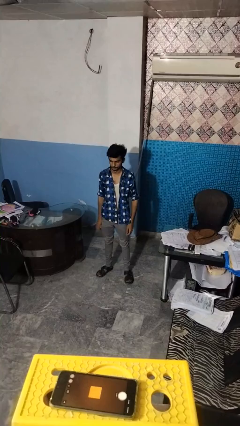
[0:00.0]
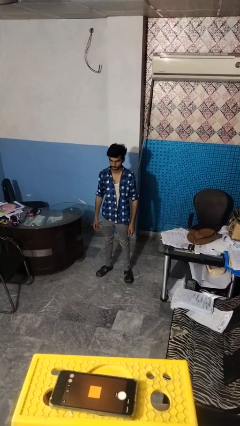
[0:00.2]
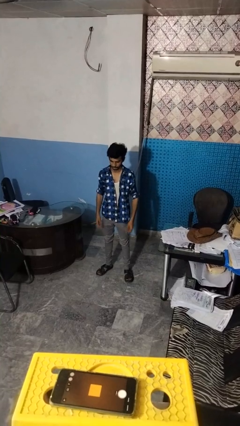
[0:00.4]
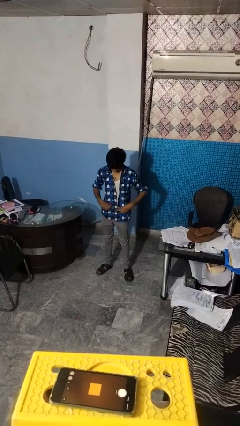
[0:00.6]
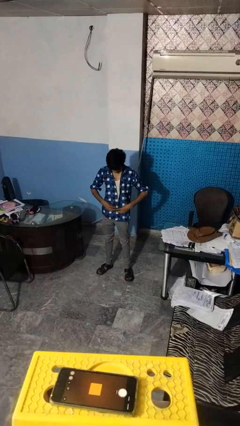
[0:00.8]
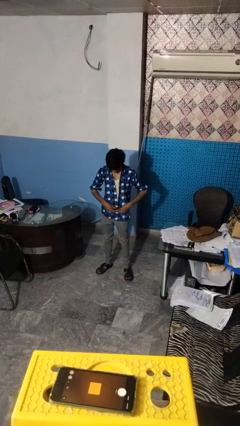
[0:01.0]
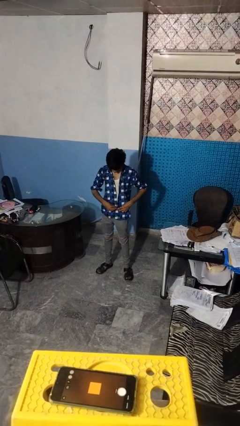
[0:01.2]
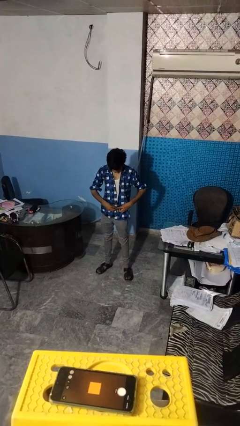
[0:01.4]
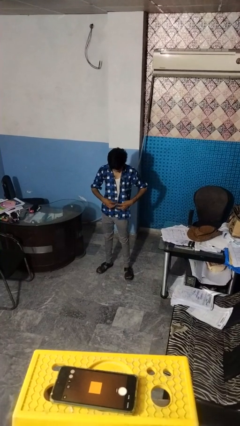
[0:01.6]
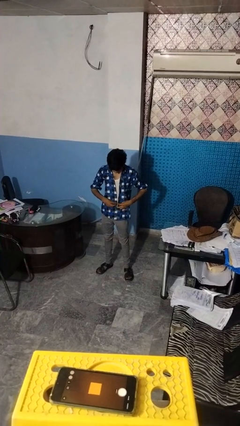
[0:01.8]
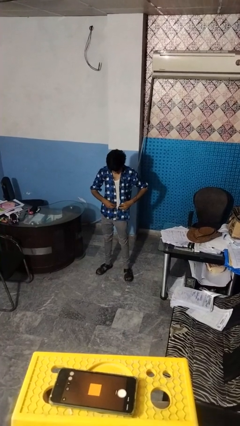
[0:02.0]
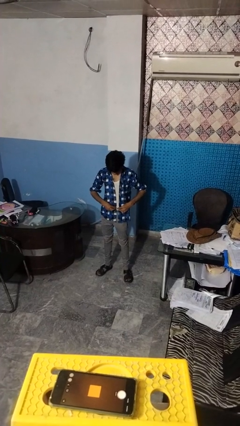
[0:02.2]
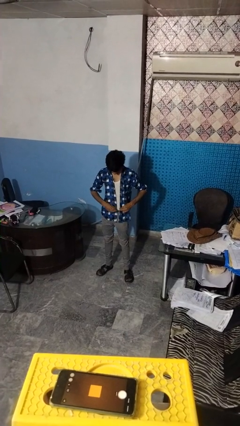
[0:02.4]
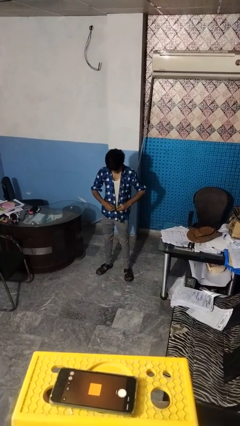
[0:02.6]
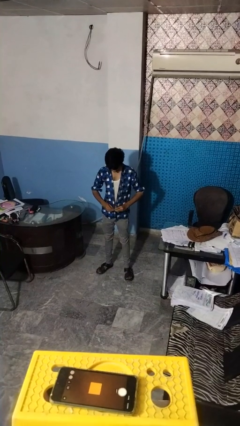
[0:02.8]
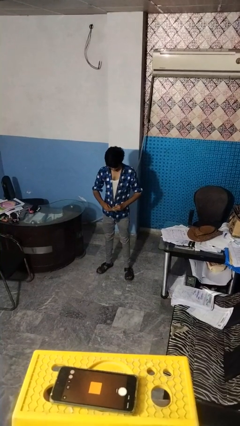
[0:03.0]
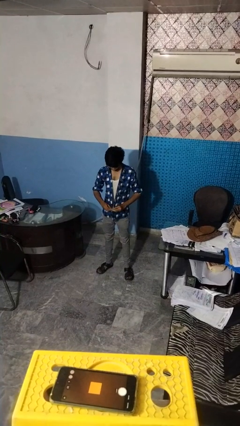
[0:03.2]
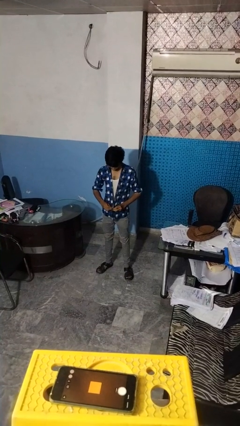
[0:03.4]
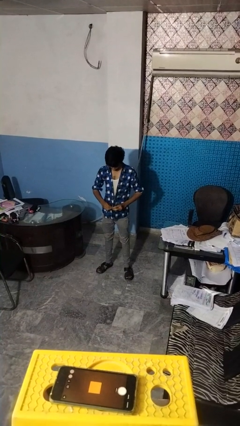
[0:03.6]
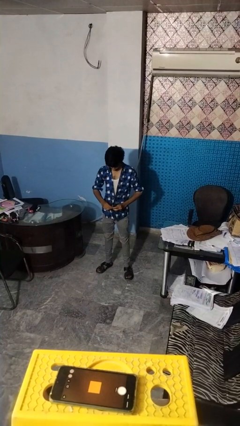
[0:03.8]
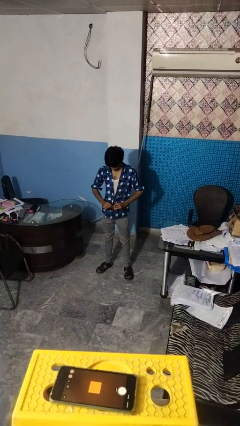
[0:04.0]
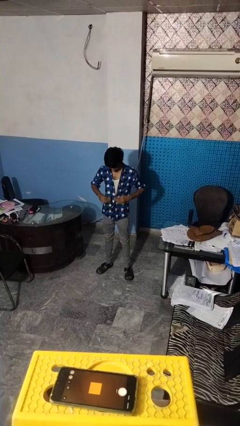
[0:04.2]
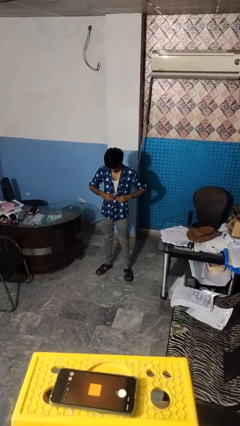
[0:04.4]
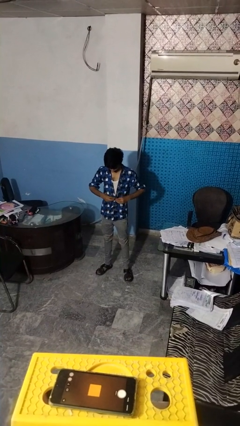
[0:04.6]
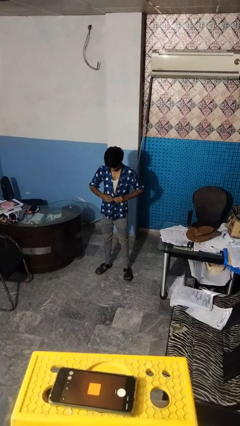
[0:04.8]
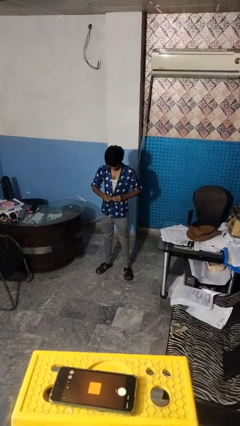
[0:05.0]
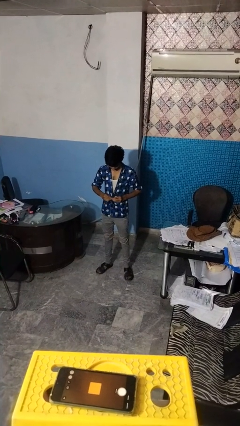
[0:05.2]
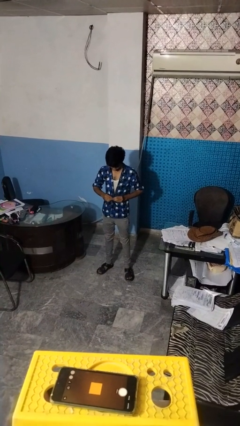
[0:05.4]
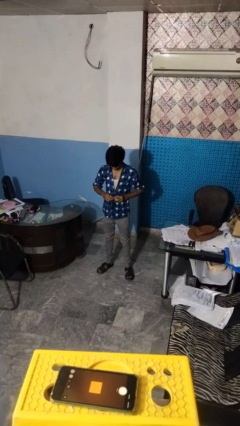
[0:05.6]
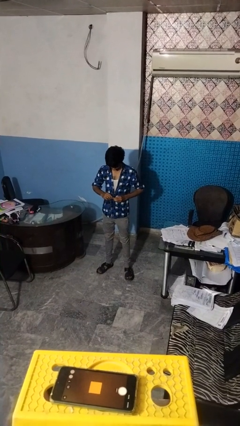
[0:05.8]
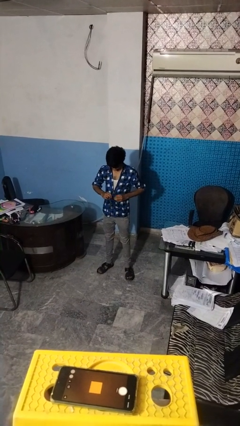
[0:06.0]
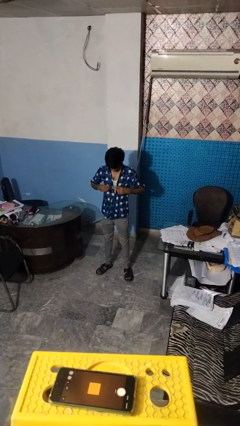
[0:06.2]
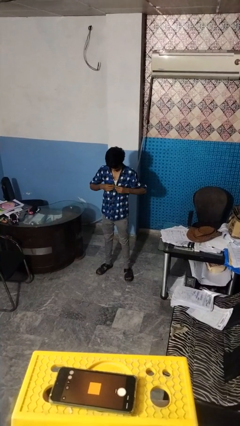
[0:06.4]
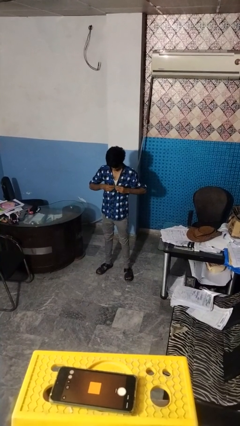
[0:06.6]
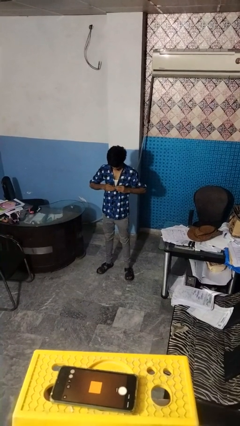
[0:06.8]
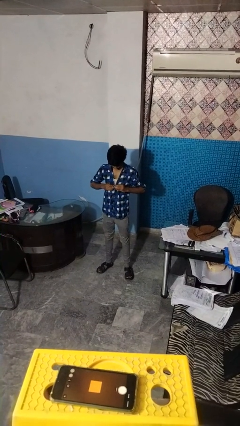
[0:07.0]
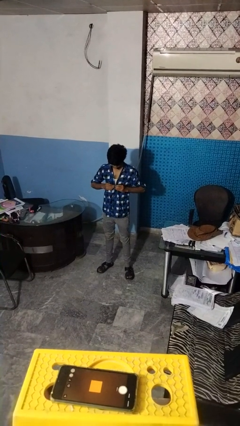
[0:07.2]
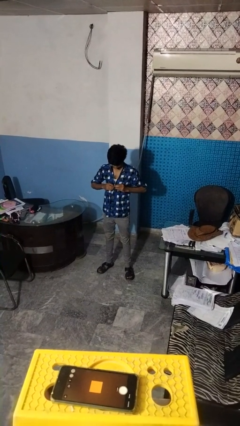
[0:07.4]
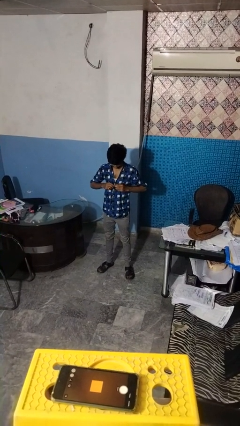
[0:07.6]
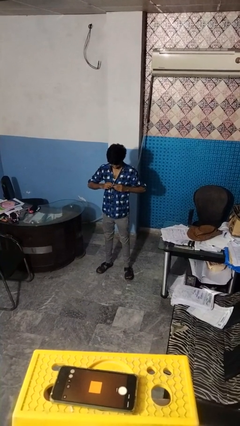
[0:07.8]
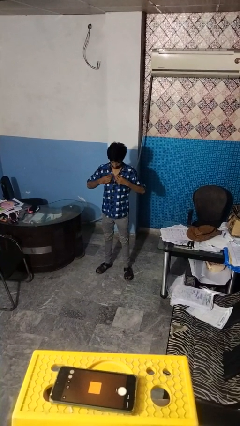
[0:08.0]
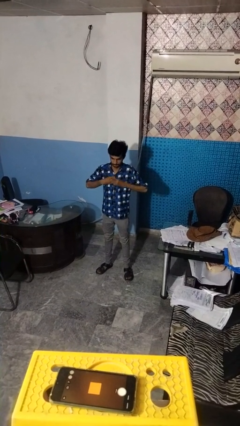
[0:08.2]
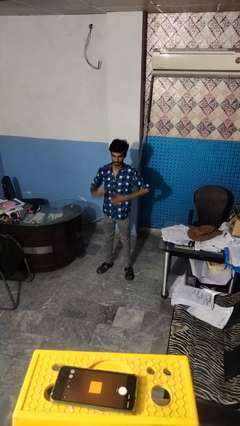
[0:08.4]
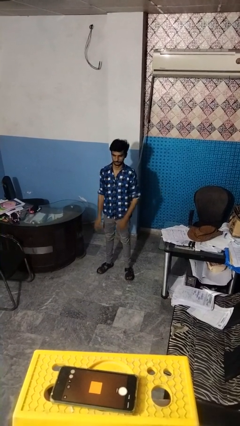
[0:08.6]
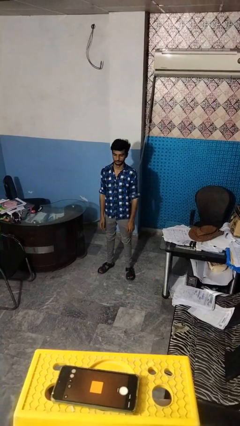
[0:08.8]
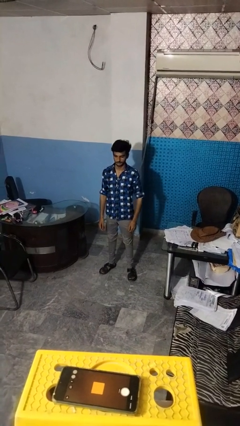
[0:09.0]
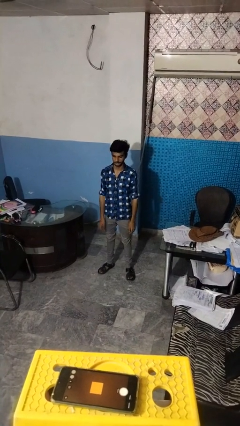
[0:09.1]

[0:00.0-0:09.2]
person buttons shirt

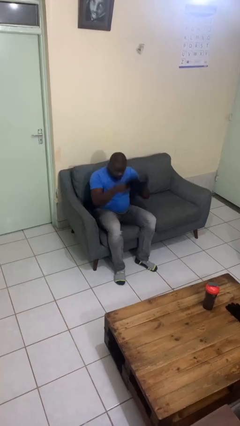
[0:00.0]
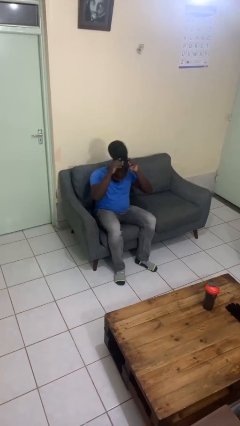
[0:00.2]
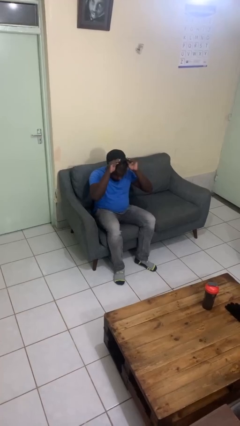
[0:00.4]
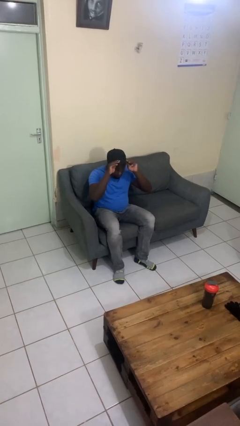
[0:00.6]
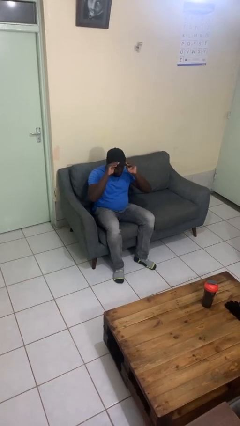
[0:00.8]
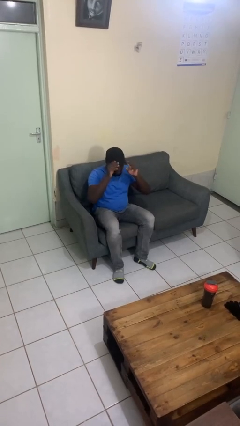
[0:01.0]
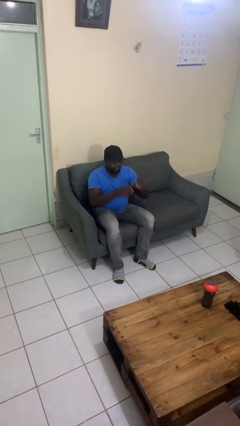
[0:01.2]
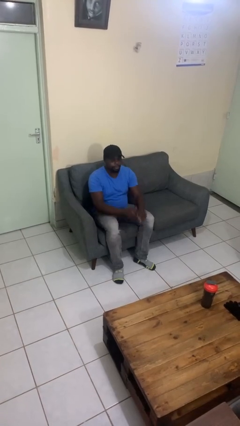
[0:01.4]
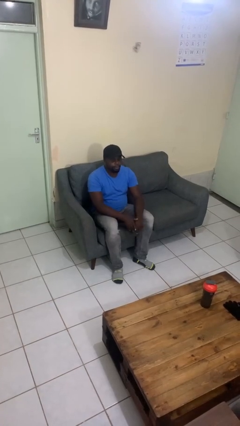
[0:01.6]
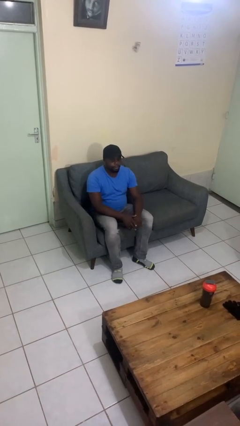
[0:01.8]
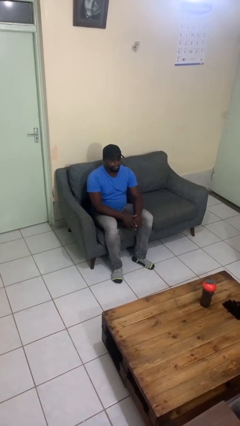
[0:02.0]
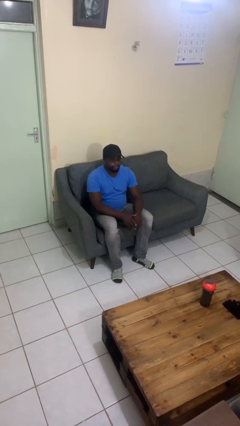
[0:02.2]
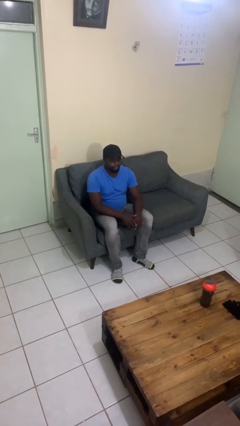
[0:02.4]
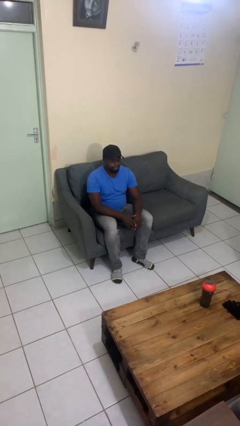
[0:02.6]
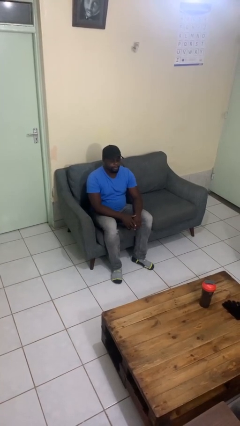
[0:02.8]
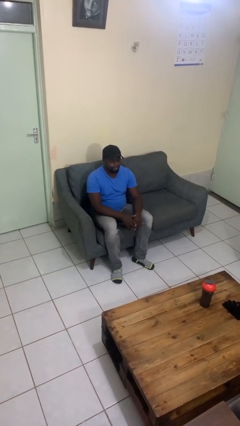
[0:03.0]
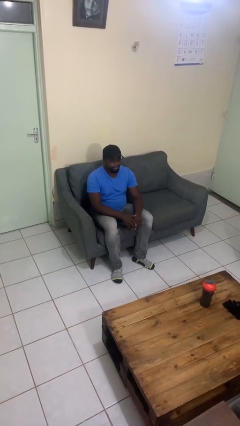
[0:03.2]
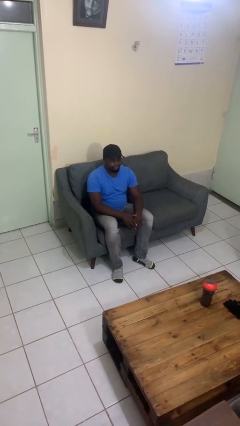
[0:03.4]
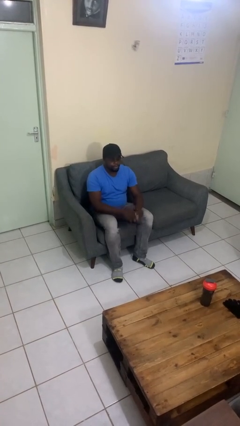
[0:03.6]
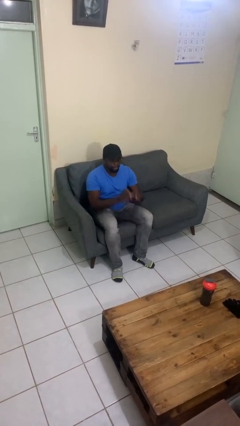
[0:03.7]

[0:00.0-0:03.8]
person puts on hat

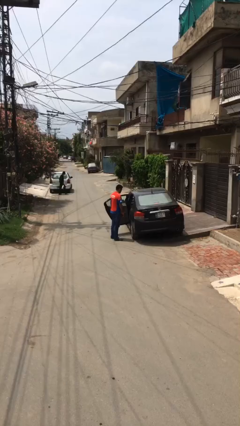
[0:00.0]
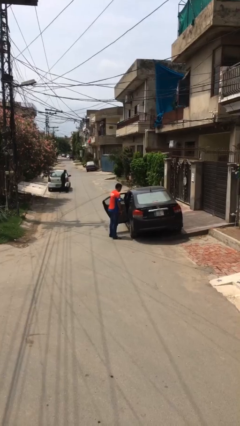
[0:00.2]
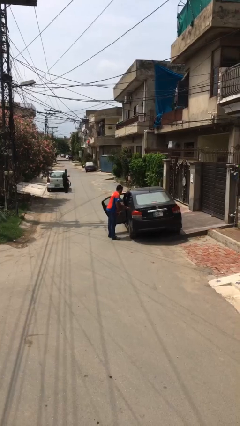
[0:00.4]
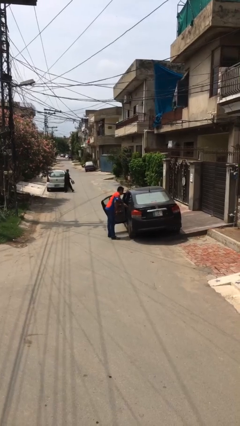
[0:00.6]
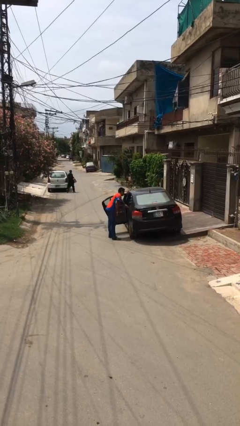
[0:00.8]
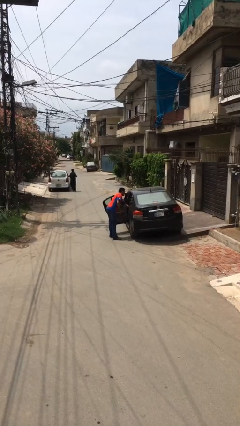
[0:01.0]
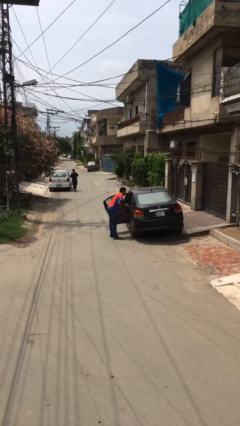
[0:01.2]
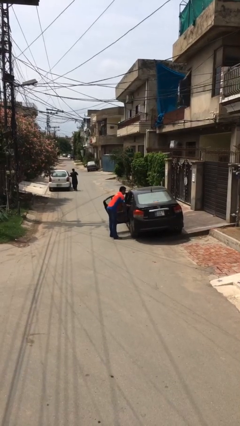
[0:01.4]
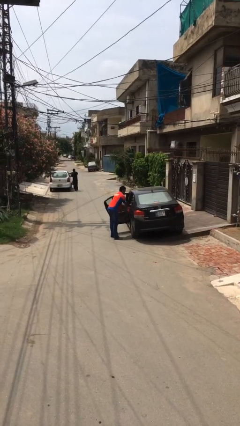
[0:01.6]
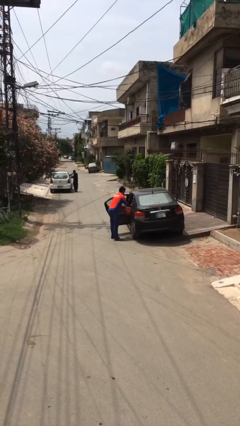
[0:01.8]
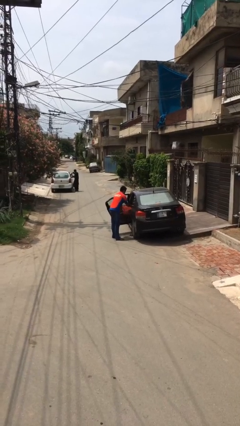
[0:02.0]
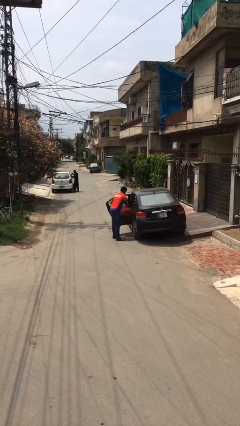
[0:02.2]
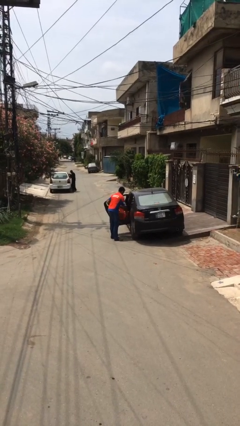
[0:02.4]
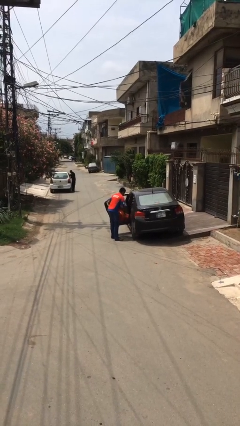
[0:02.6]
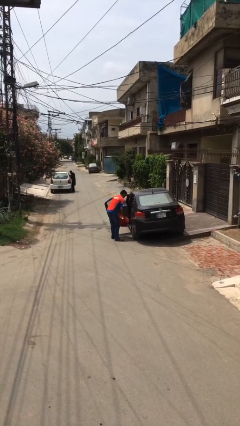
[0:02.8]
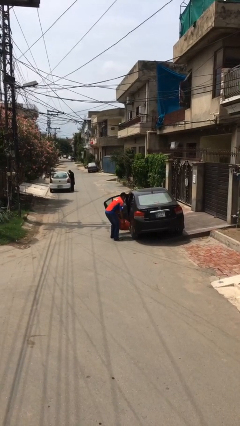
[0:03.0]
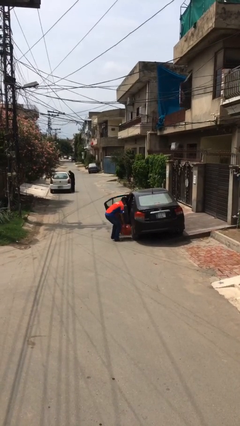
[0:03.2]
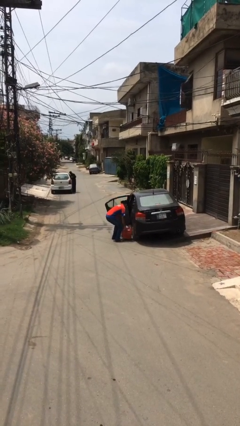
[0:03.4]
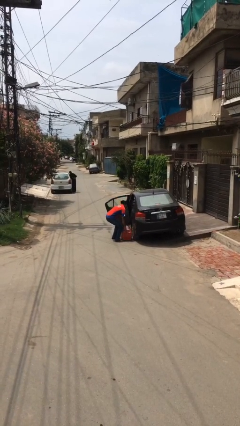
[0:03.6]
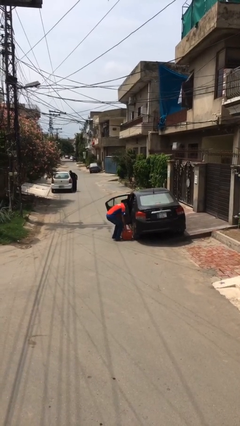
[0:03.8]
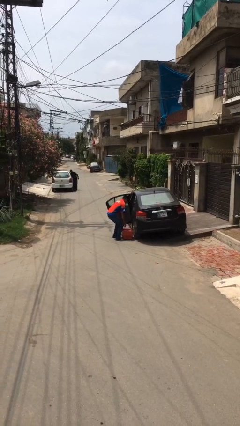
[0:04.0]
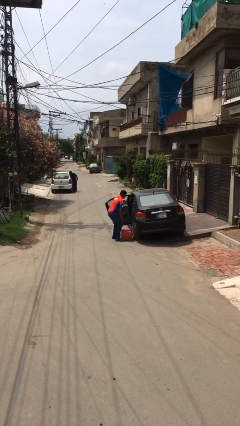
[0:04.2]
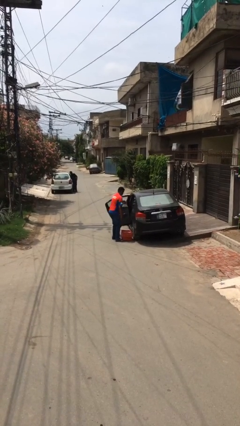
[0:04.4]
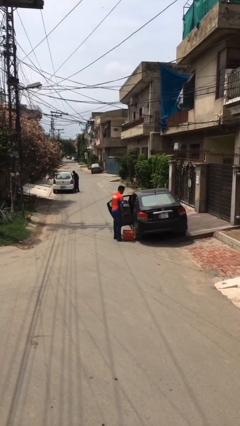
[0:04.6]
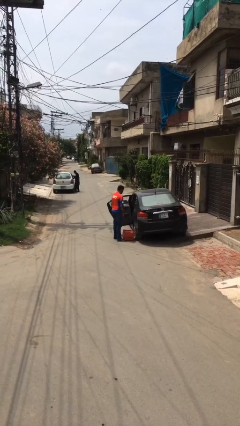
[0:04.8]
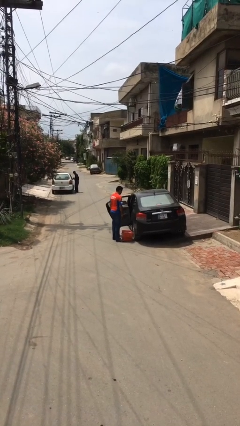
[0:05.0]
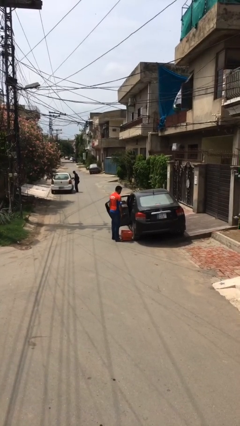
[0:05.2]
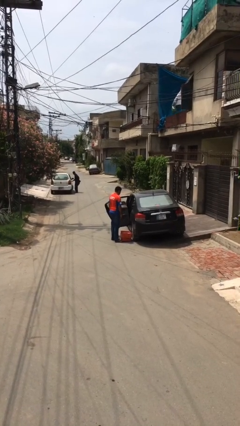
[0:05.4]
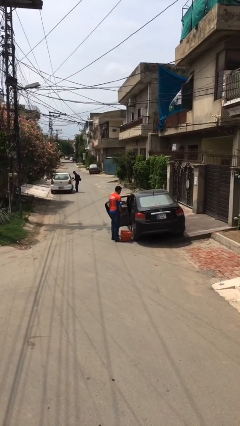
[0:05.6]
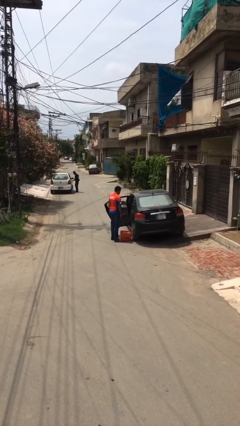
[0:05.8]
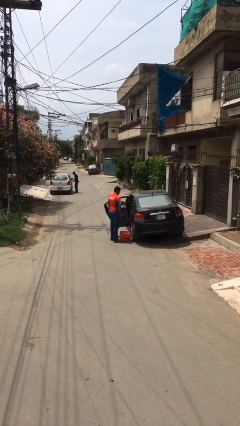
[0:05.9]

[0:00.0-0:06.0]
person unloads car
